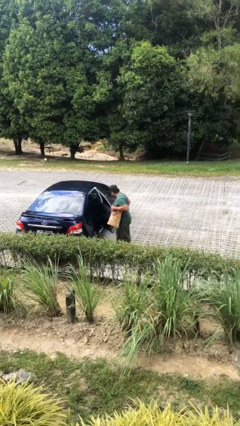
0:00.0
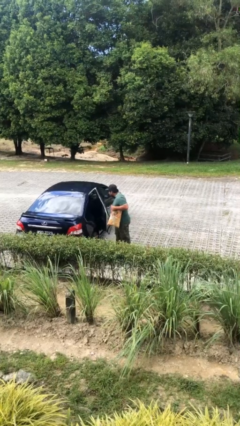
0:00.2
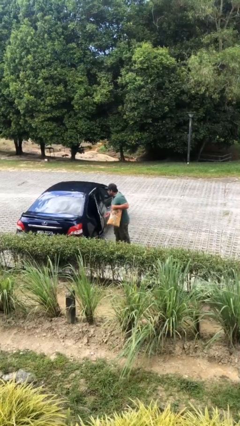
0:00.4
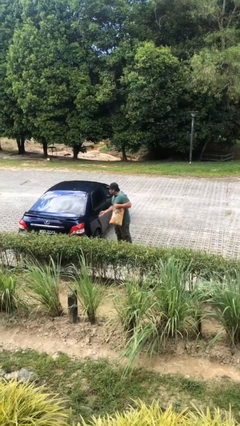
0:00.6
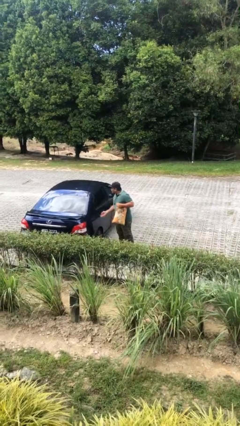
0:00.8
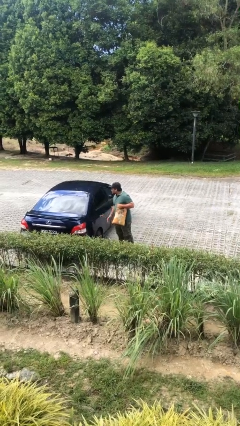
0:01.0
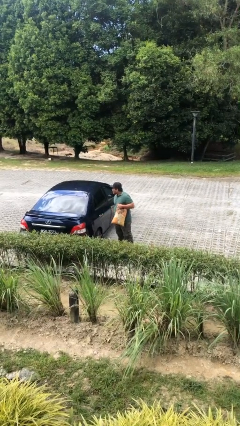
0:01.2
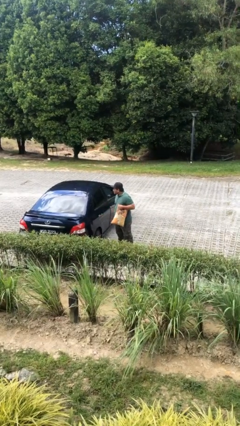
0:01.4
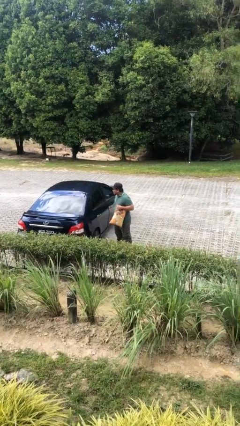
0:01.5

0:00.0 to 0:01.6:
person closes car door

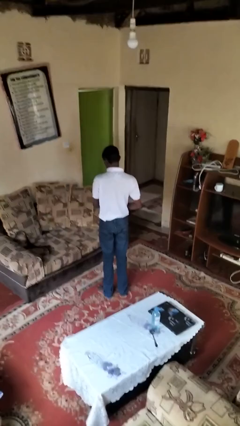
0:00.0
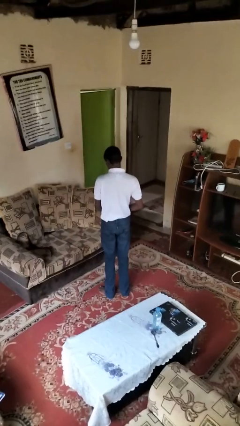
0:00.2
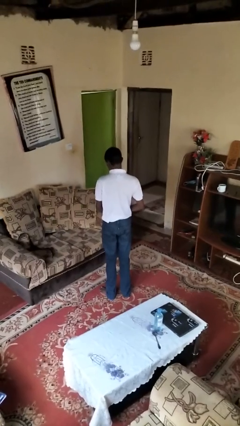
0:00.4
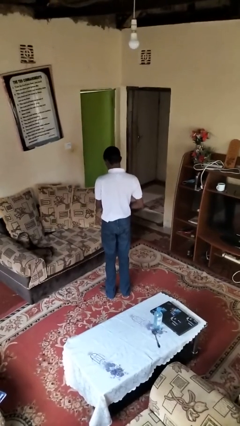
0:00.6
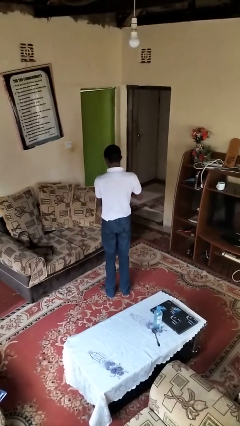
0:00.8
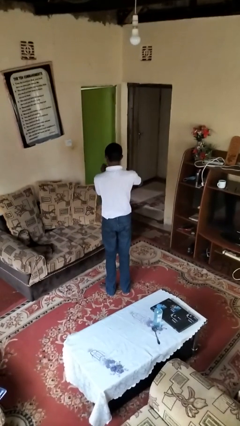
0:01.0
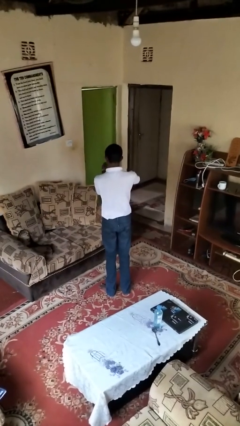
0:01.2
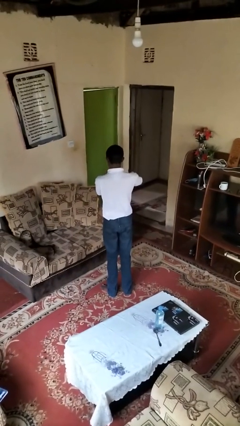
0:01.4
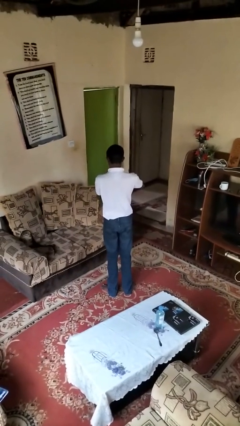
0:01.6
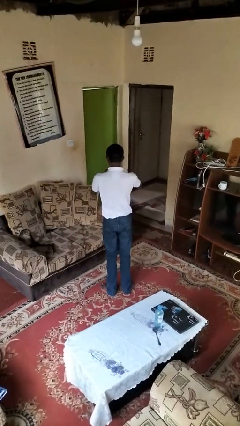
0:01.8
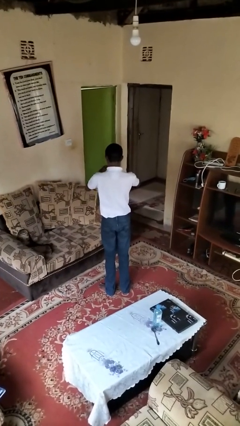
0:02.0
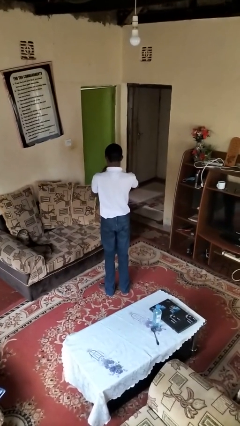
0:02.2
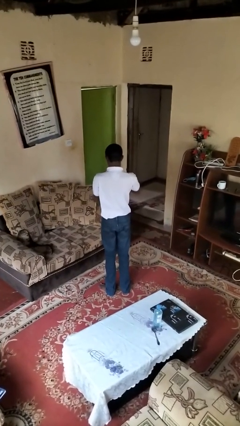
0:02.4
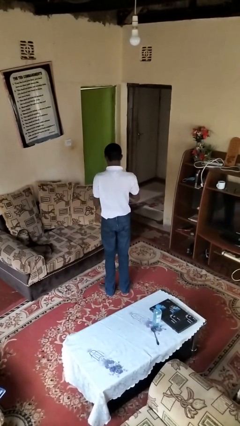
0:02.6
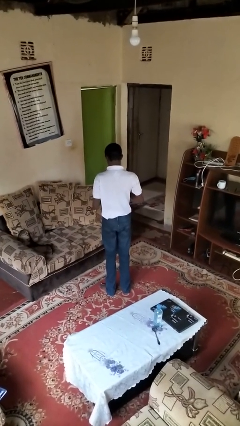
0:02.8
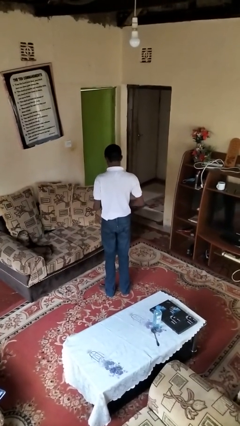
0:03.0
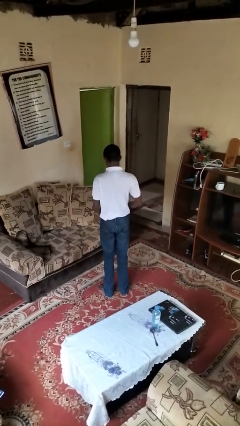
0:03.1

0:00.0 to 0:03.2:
person takes off wristwatch

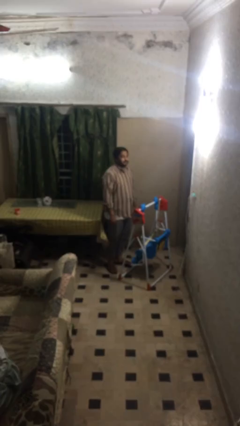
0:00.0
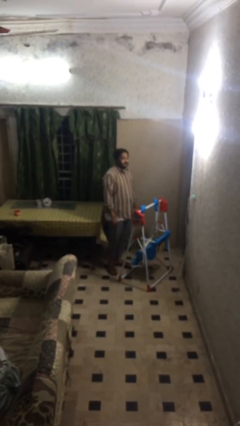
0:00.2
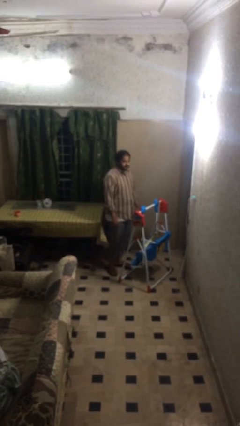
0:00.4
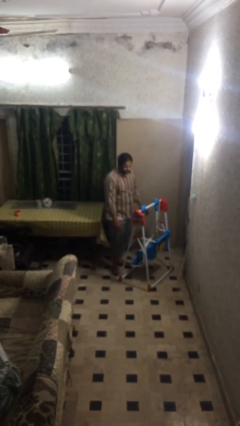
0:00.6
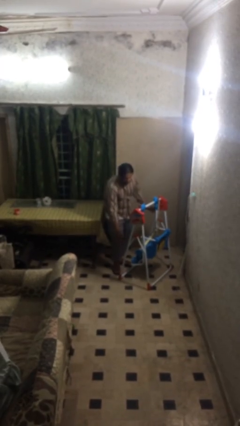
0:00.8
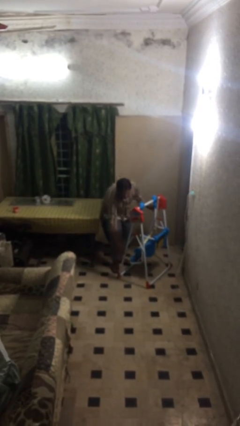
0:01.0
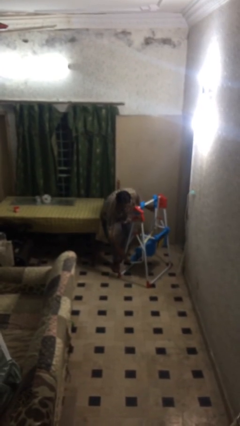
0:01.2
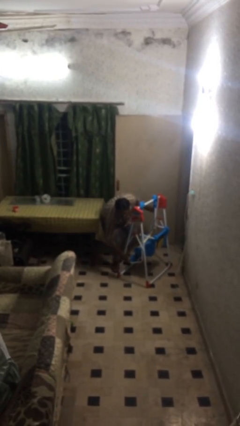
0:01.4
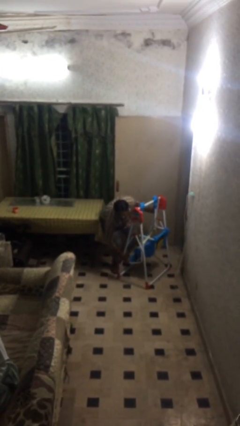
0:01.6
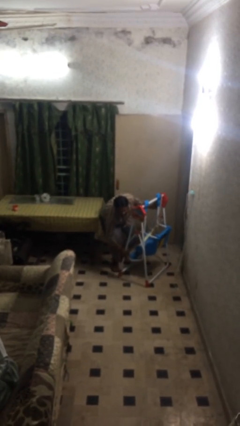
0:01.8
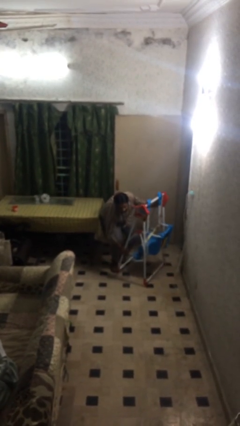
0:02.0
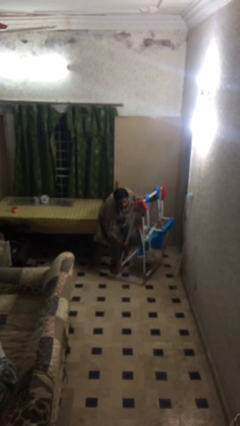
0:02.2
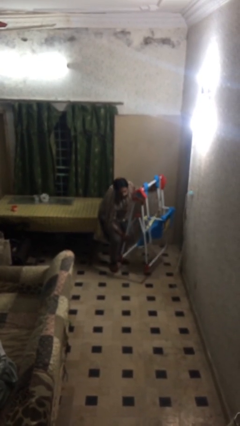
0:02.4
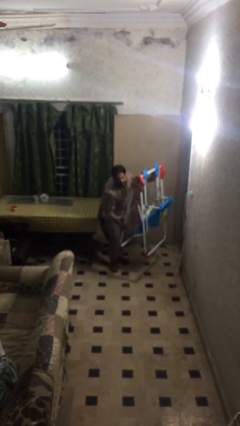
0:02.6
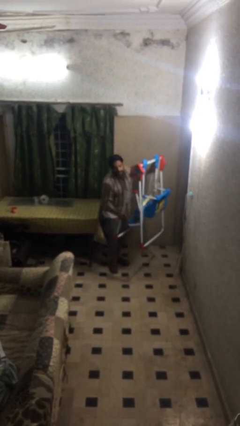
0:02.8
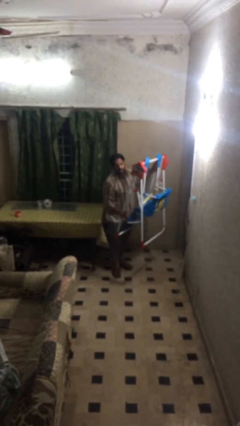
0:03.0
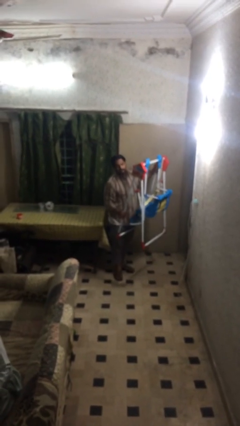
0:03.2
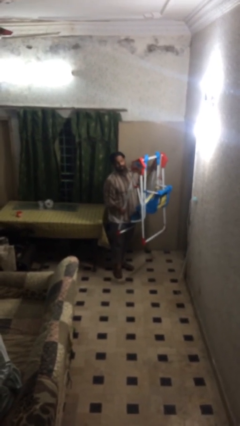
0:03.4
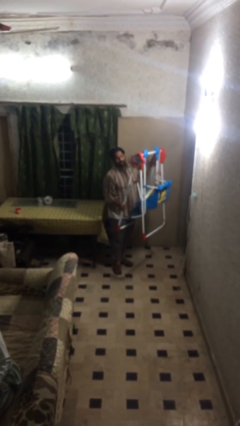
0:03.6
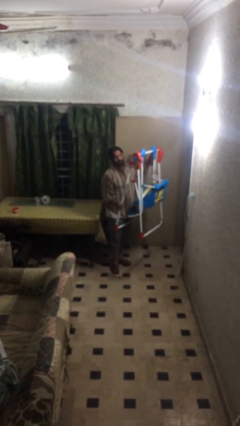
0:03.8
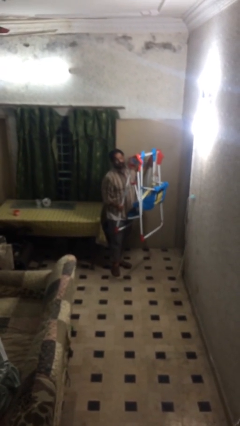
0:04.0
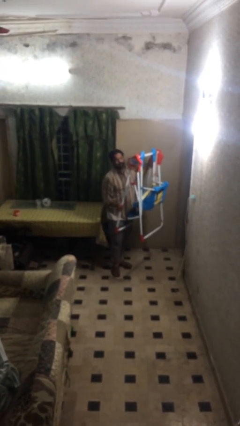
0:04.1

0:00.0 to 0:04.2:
person picks up object from floor

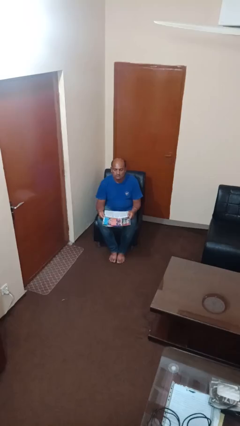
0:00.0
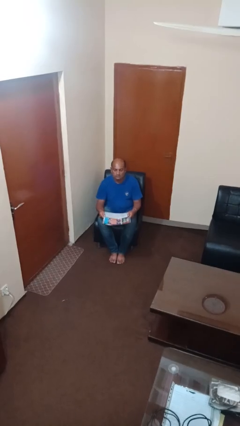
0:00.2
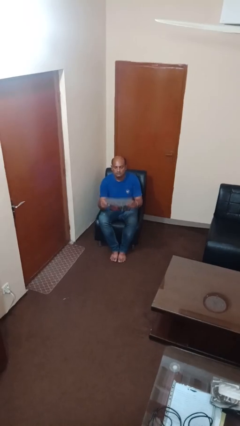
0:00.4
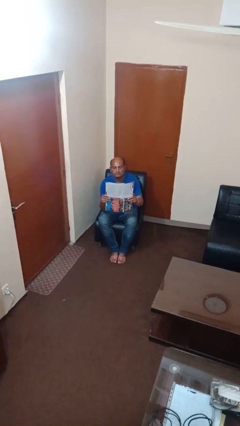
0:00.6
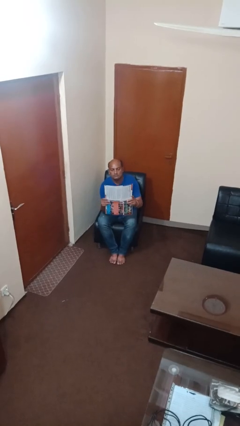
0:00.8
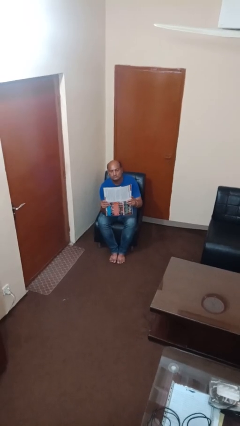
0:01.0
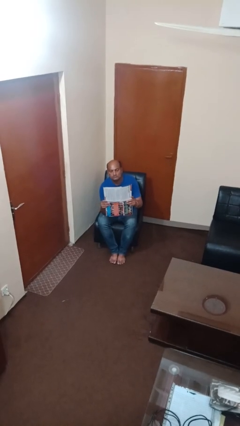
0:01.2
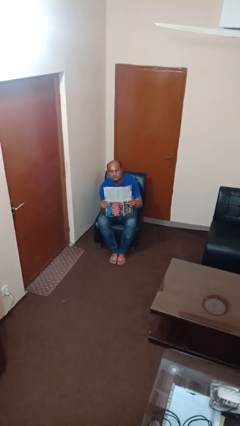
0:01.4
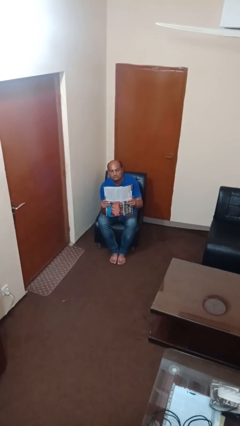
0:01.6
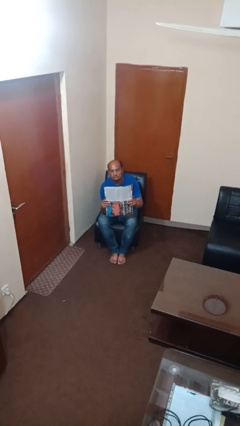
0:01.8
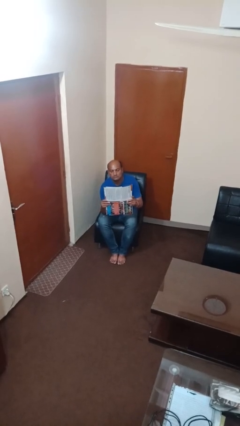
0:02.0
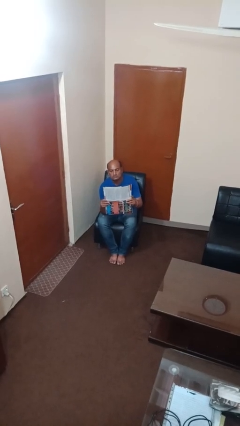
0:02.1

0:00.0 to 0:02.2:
person reads newspaper

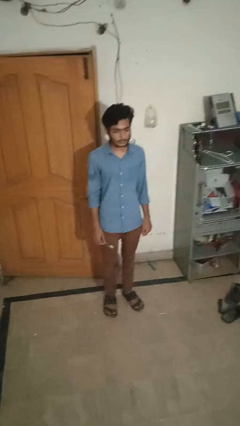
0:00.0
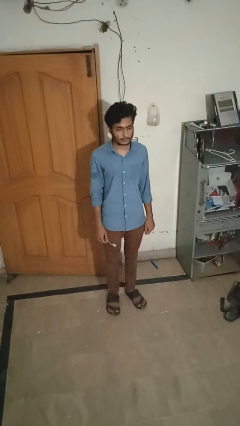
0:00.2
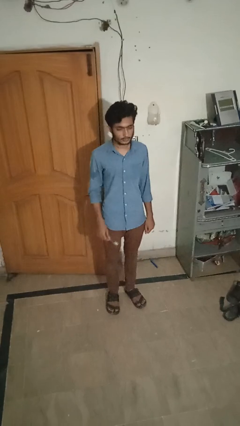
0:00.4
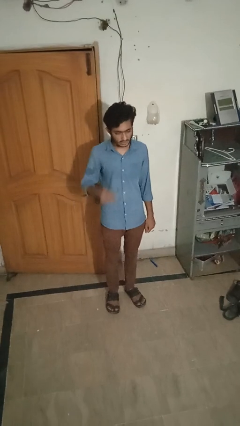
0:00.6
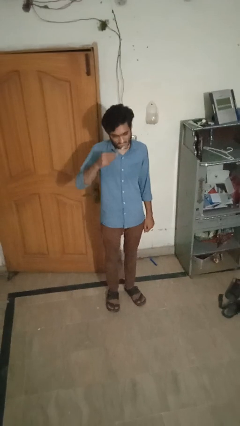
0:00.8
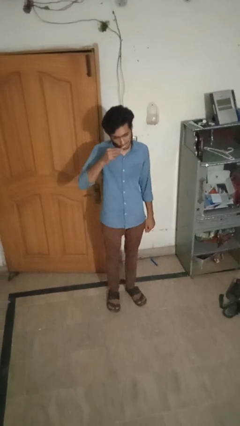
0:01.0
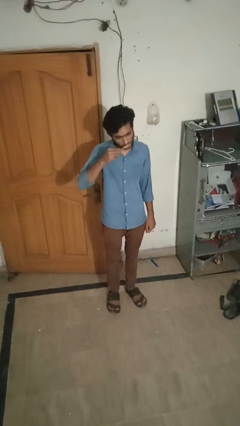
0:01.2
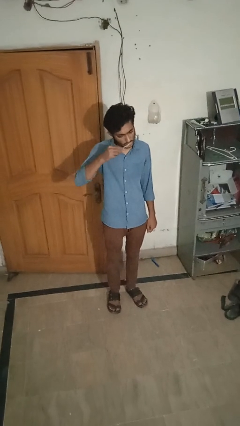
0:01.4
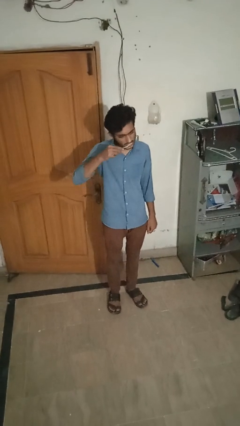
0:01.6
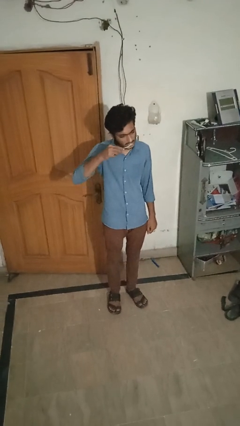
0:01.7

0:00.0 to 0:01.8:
person brushes teeth

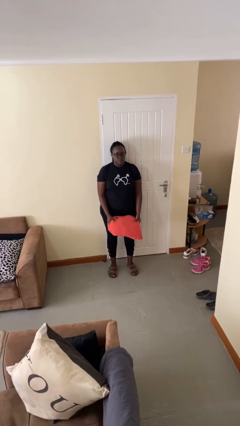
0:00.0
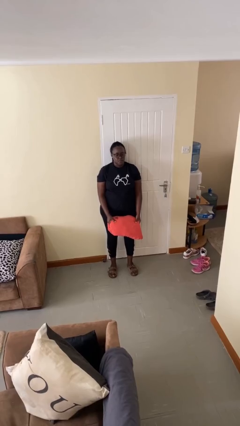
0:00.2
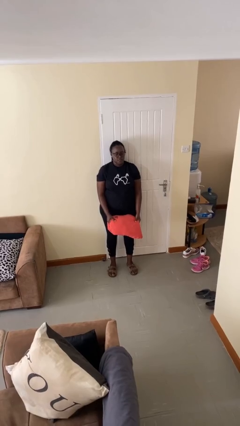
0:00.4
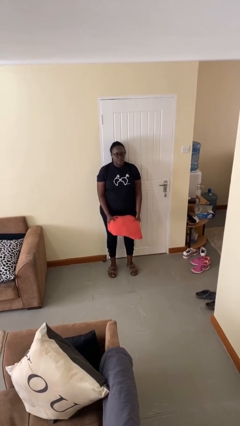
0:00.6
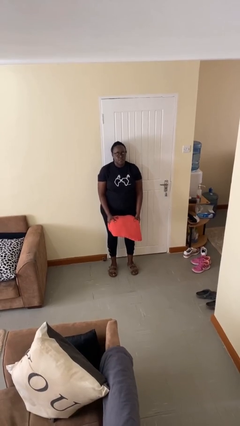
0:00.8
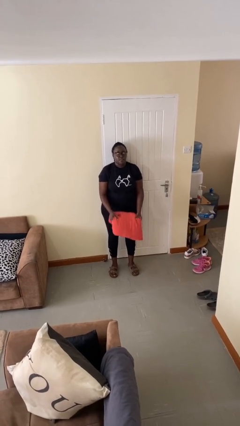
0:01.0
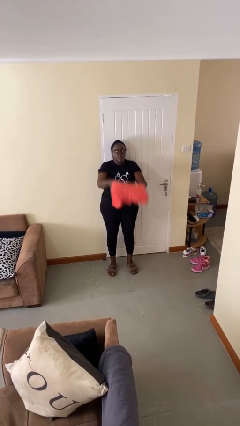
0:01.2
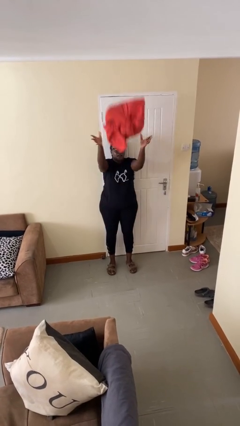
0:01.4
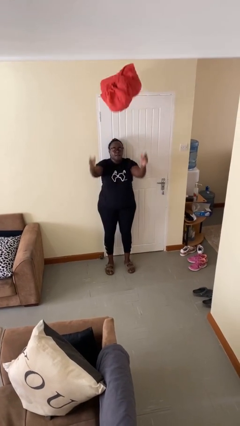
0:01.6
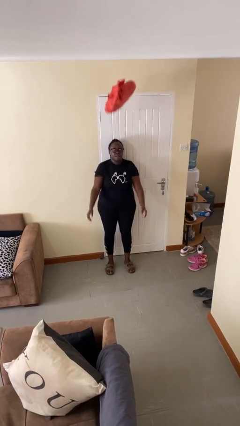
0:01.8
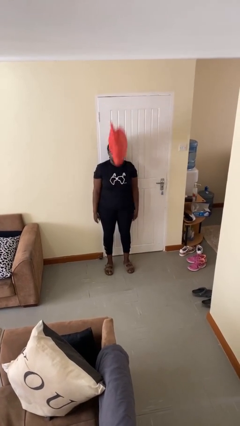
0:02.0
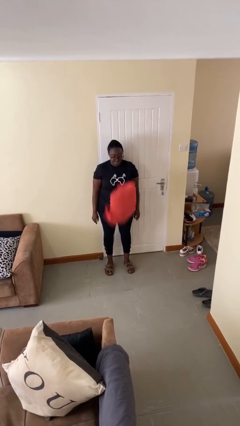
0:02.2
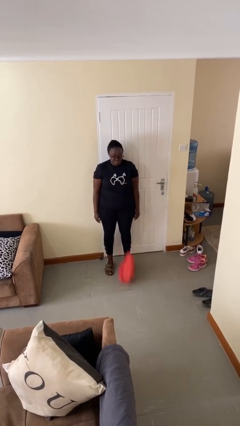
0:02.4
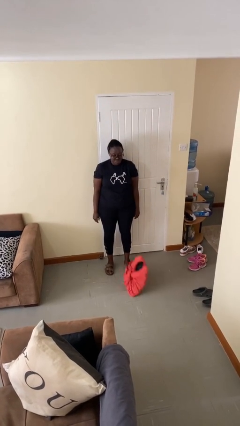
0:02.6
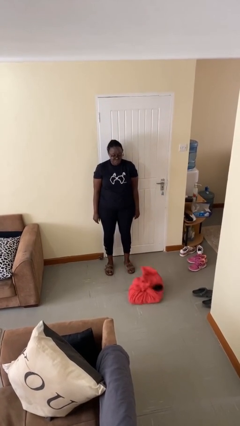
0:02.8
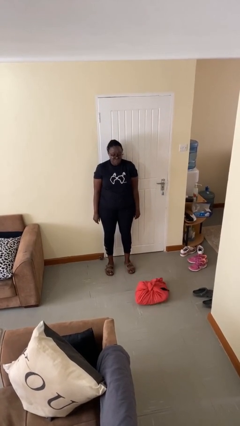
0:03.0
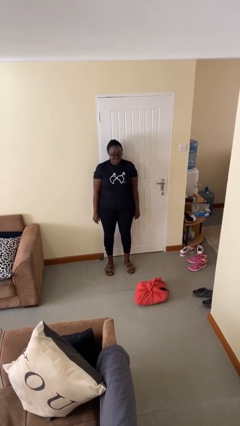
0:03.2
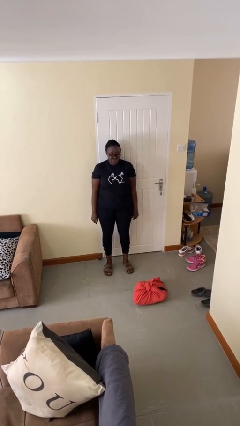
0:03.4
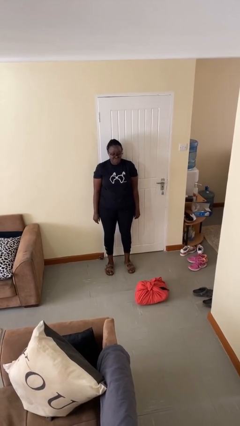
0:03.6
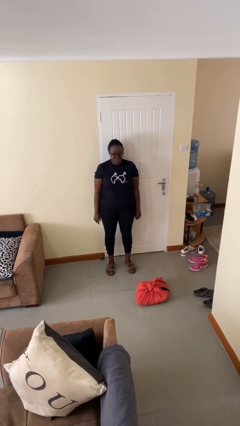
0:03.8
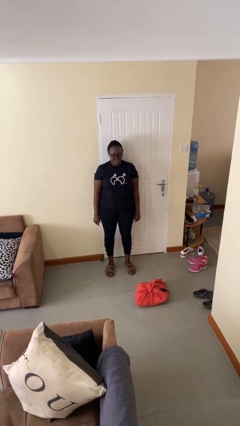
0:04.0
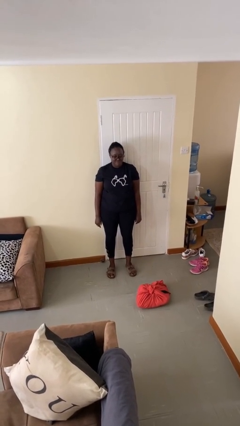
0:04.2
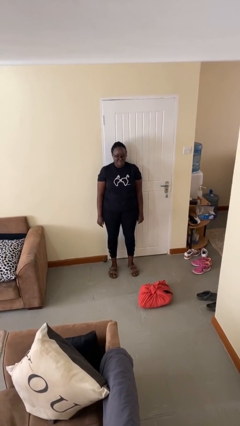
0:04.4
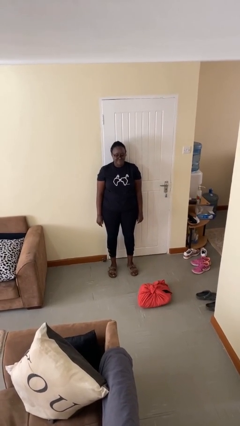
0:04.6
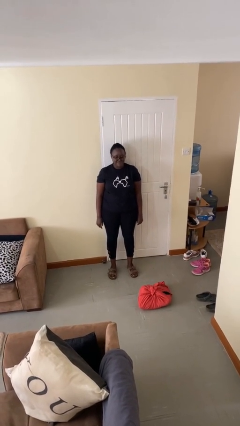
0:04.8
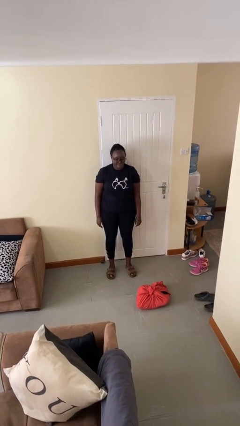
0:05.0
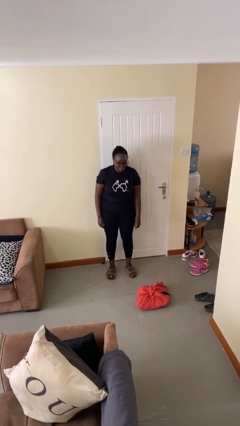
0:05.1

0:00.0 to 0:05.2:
person throws object into air
